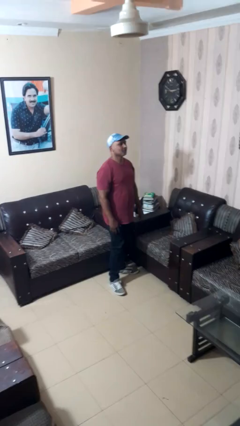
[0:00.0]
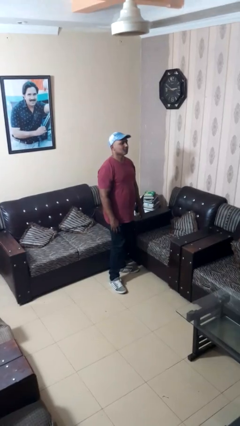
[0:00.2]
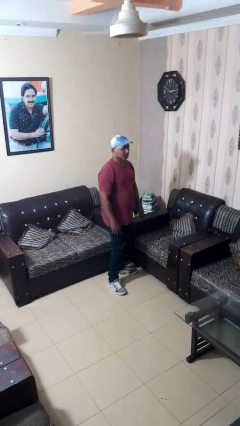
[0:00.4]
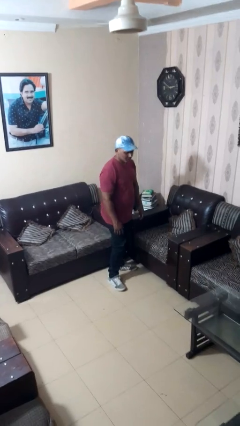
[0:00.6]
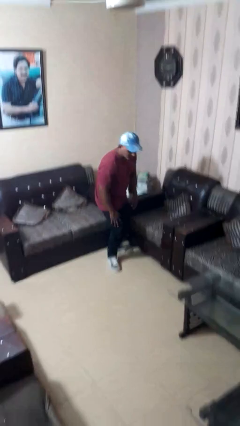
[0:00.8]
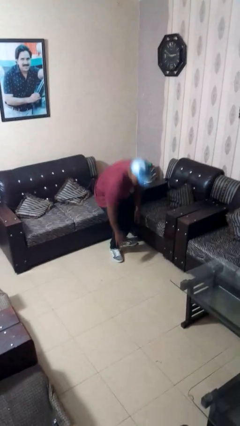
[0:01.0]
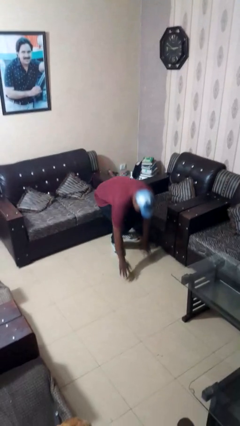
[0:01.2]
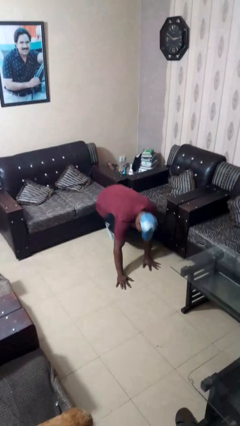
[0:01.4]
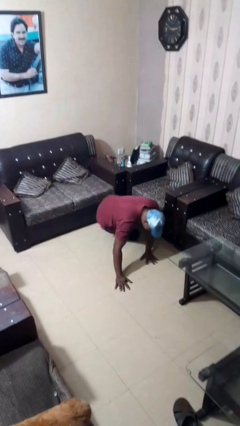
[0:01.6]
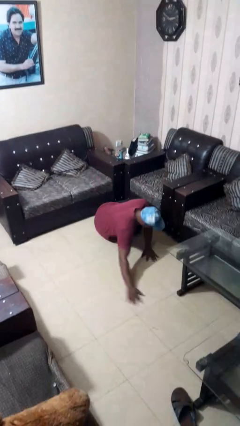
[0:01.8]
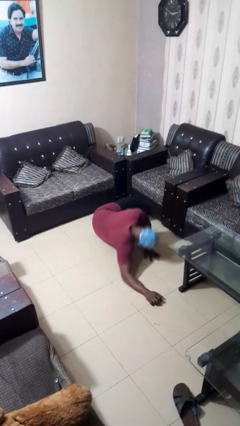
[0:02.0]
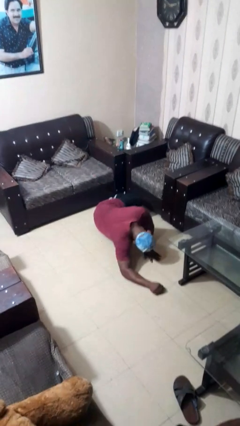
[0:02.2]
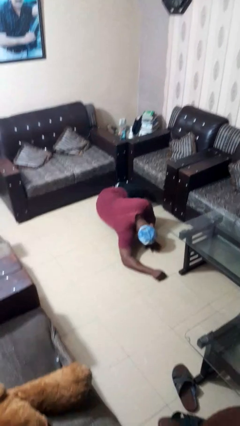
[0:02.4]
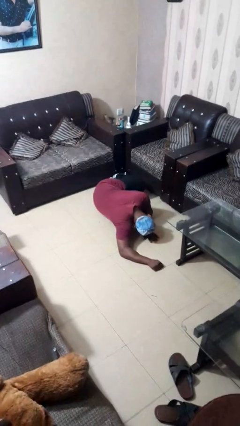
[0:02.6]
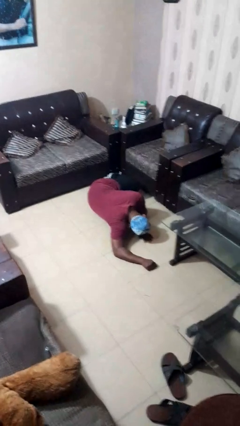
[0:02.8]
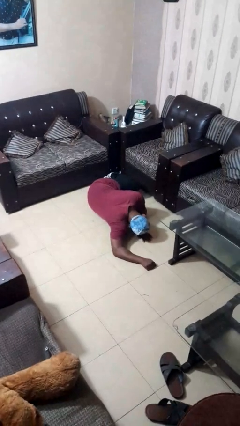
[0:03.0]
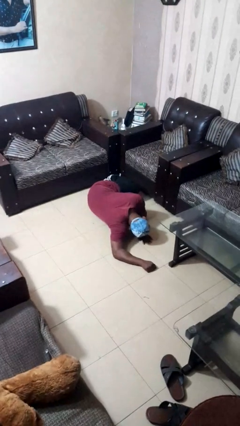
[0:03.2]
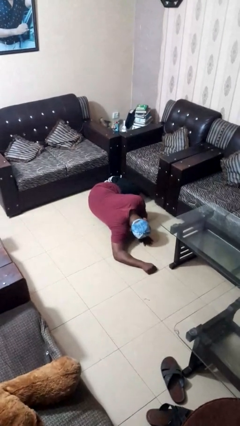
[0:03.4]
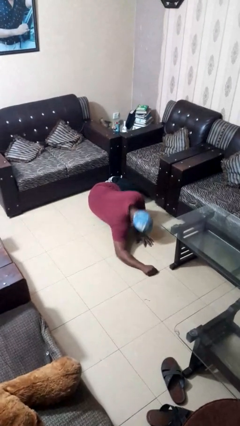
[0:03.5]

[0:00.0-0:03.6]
person falls while standing

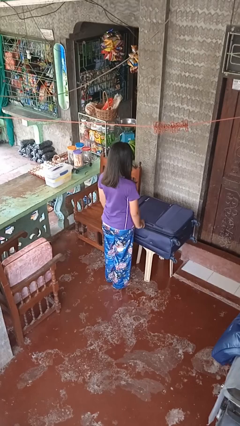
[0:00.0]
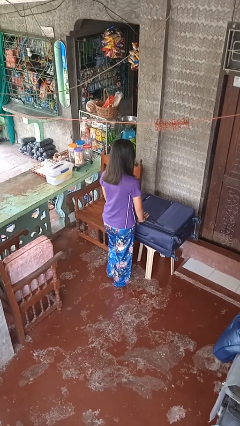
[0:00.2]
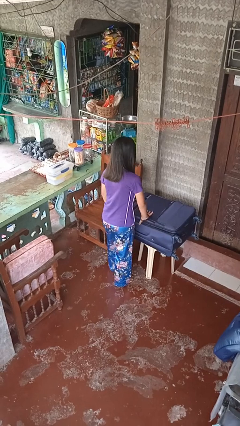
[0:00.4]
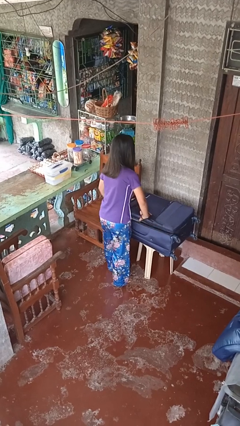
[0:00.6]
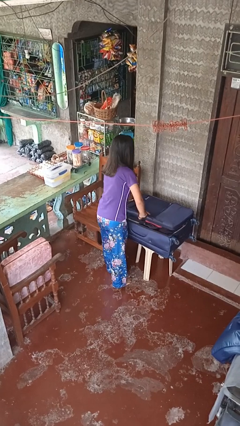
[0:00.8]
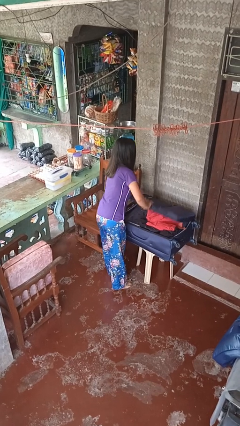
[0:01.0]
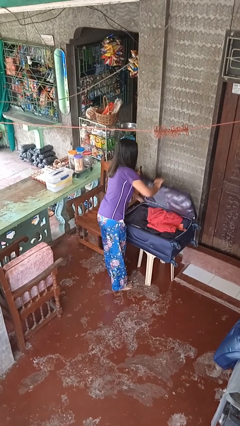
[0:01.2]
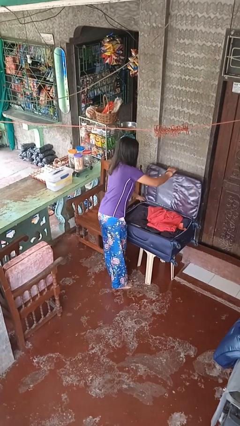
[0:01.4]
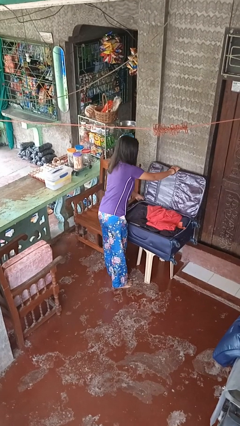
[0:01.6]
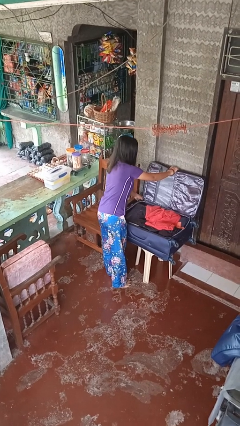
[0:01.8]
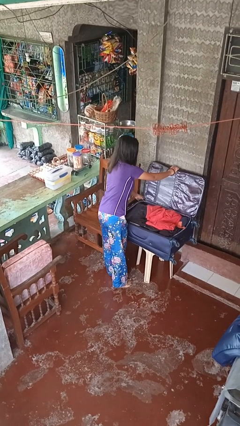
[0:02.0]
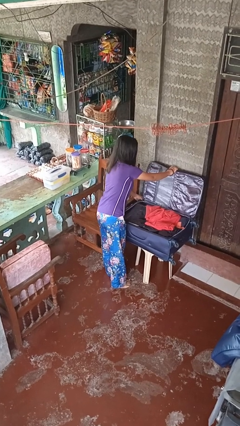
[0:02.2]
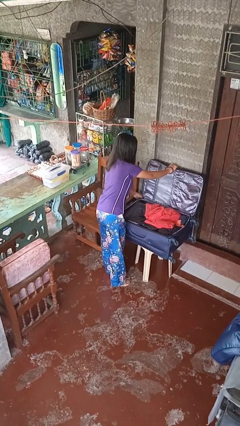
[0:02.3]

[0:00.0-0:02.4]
person opens suitcase

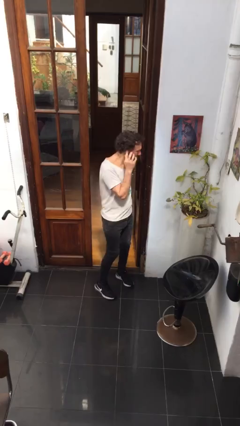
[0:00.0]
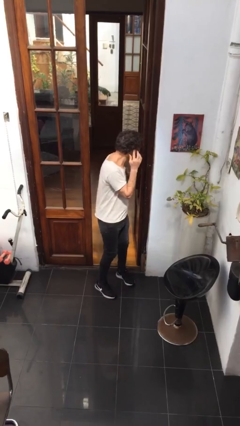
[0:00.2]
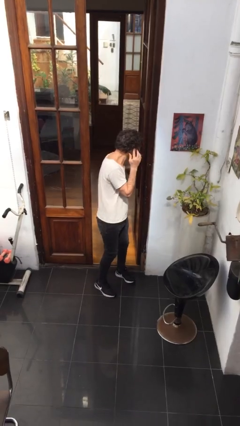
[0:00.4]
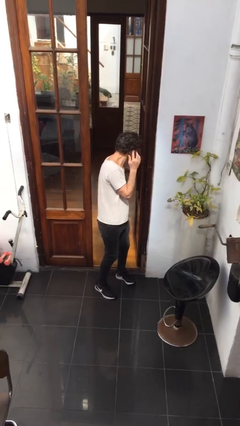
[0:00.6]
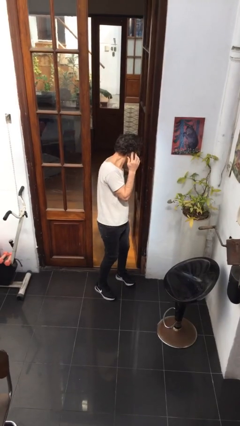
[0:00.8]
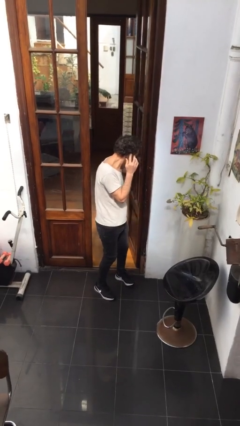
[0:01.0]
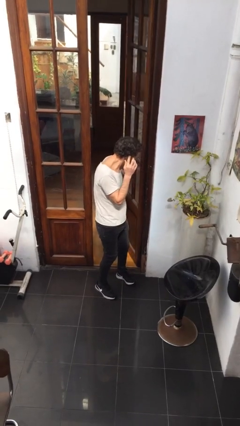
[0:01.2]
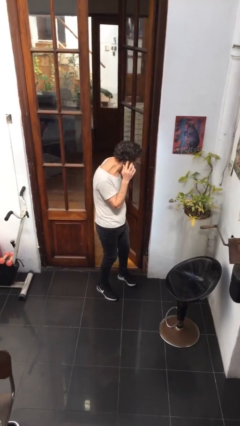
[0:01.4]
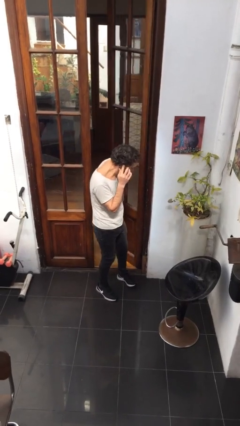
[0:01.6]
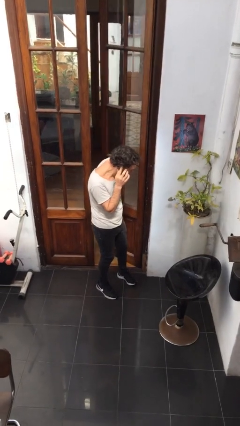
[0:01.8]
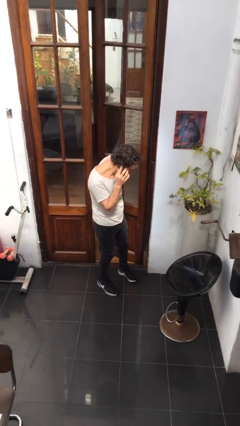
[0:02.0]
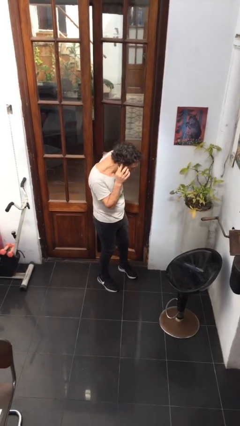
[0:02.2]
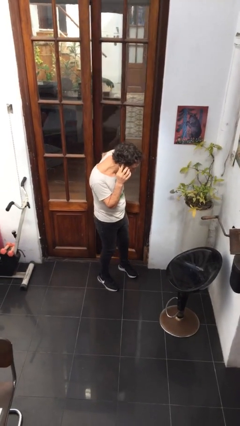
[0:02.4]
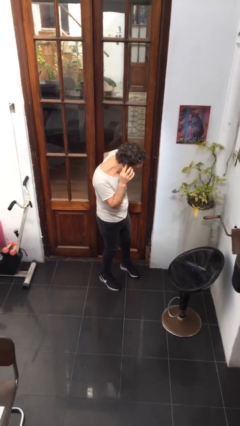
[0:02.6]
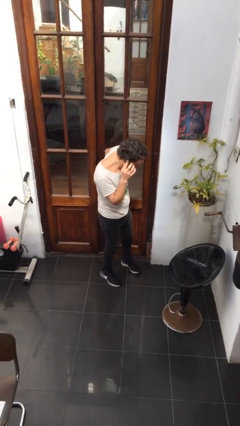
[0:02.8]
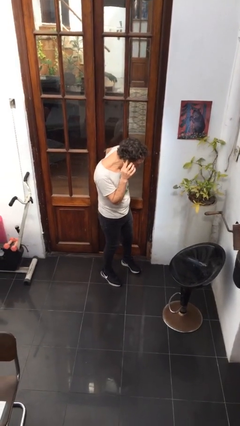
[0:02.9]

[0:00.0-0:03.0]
person closes facility door

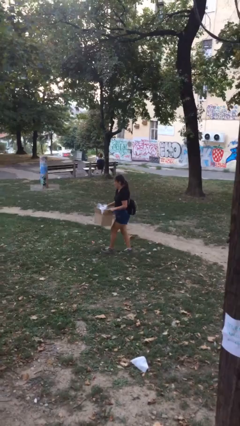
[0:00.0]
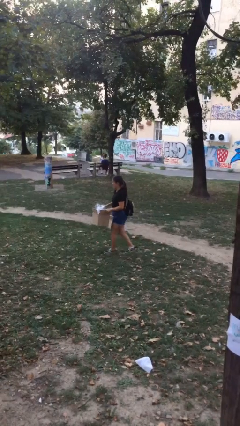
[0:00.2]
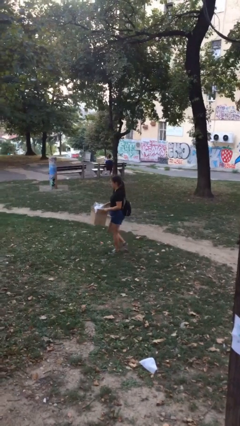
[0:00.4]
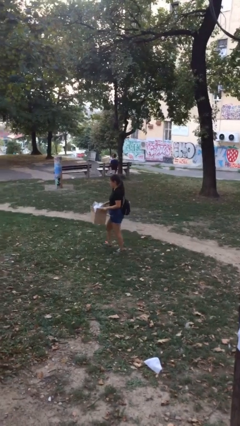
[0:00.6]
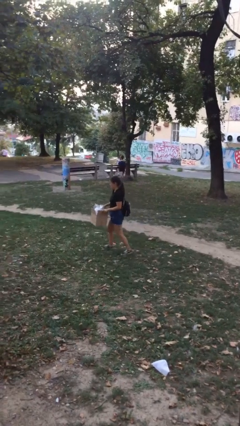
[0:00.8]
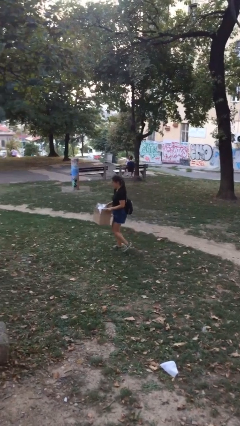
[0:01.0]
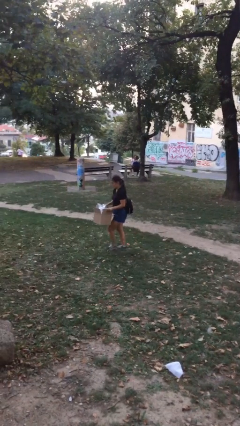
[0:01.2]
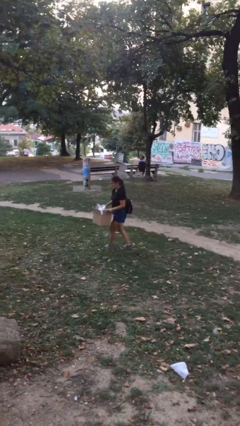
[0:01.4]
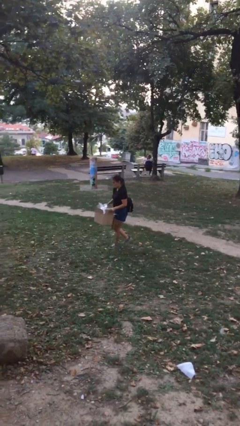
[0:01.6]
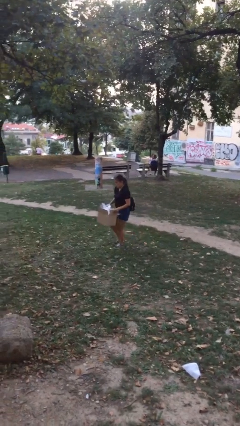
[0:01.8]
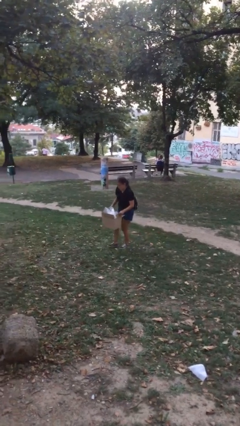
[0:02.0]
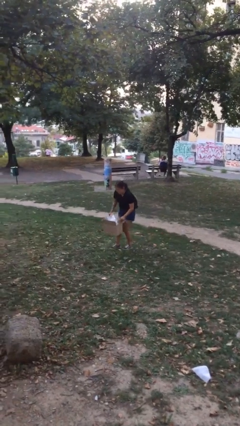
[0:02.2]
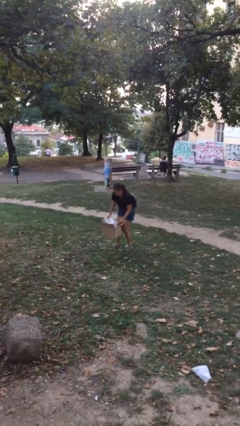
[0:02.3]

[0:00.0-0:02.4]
person carries heavy object

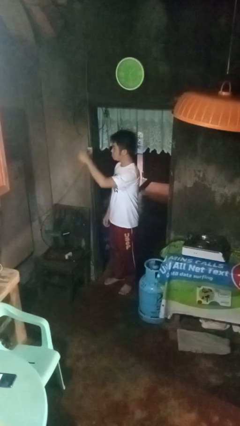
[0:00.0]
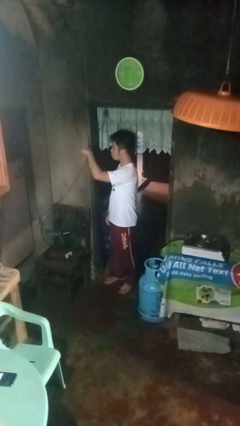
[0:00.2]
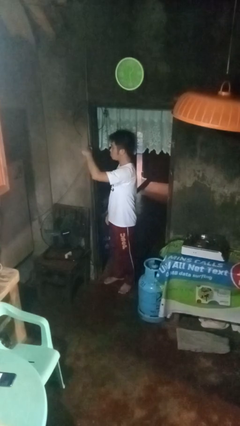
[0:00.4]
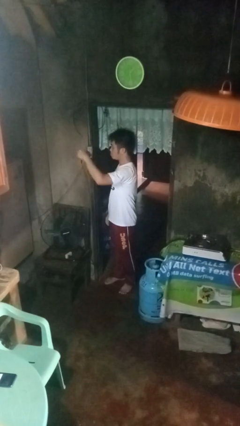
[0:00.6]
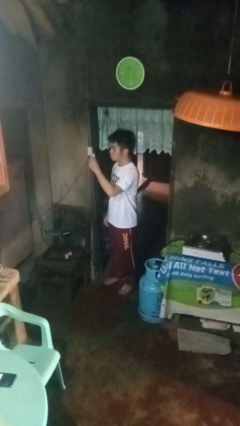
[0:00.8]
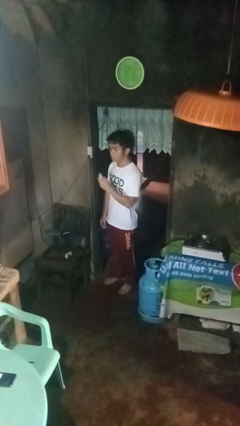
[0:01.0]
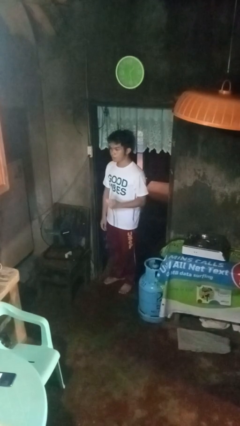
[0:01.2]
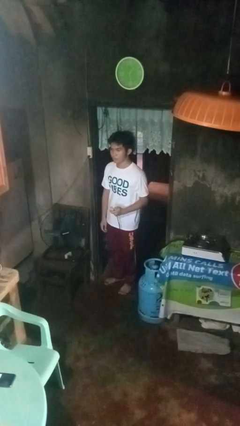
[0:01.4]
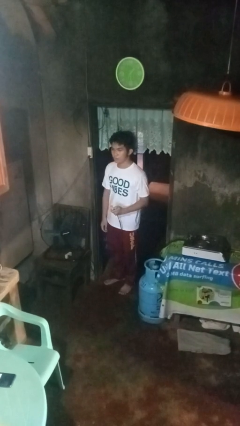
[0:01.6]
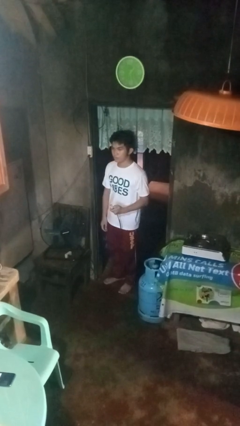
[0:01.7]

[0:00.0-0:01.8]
person unplugs from electrical socket

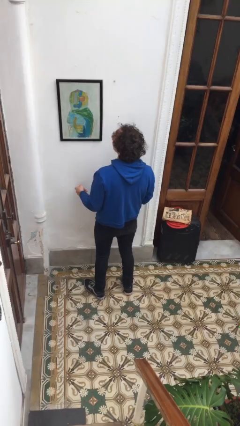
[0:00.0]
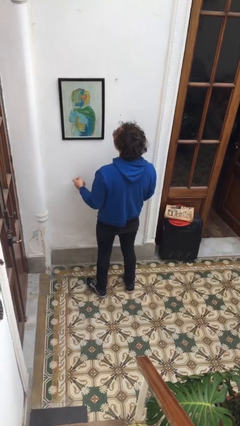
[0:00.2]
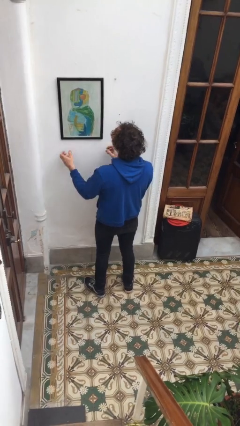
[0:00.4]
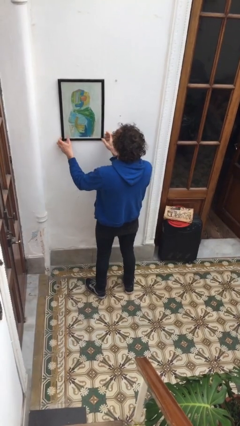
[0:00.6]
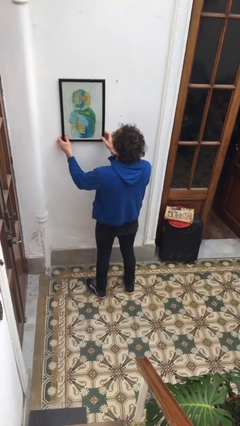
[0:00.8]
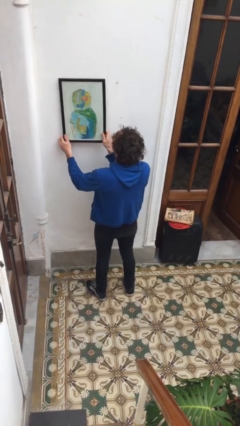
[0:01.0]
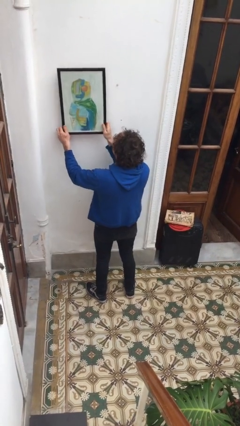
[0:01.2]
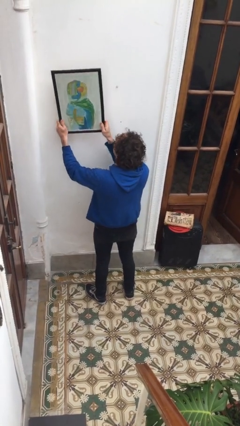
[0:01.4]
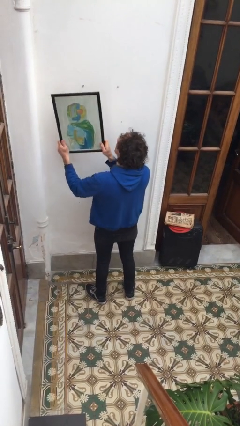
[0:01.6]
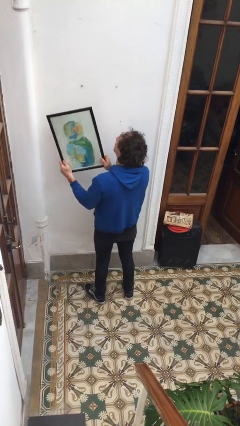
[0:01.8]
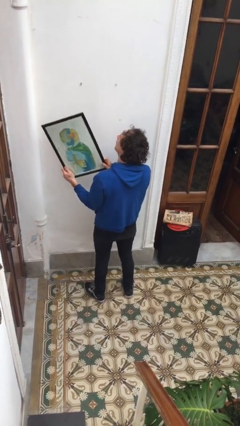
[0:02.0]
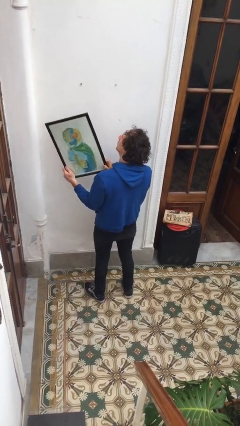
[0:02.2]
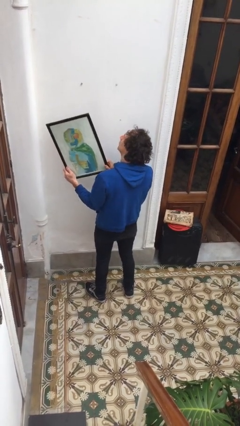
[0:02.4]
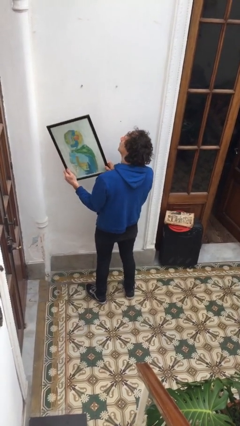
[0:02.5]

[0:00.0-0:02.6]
person takes down picture frame

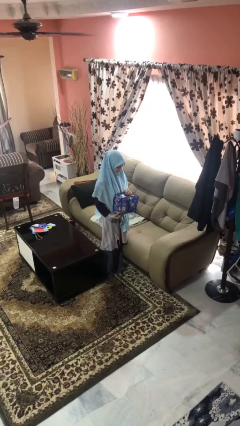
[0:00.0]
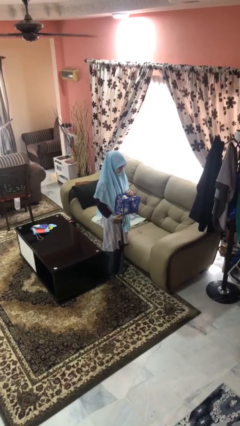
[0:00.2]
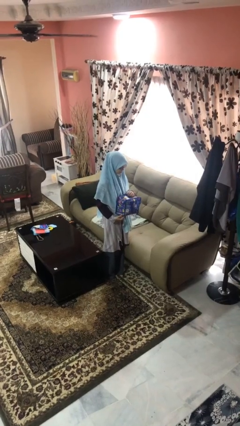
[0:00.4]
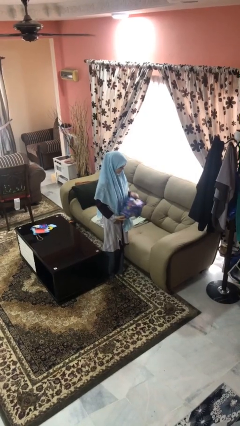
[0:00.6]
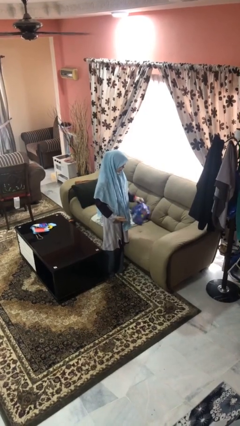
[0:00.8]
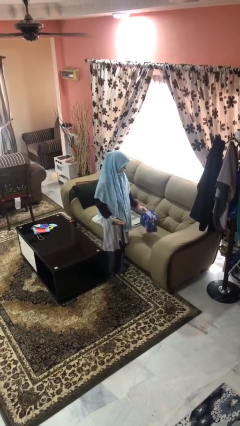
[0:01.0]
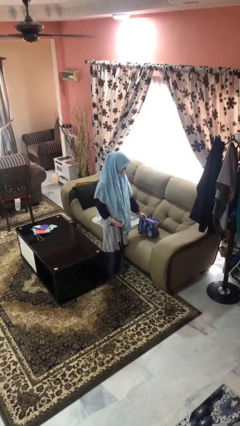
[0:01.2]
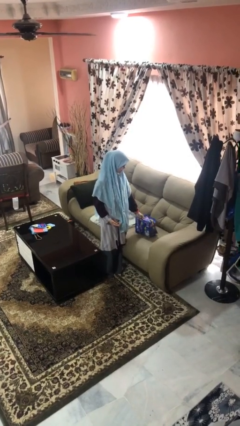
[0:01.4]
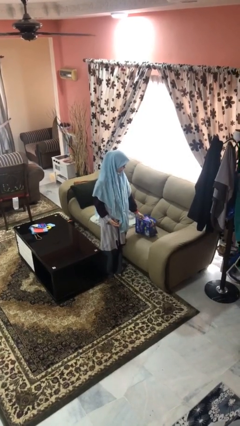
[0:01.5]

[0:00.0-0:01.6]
person puts down object on couch
